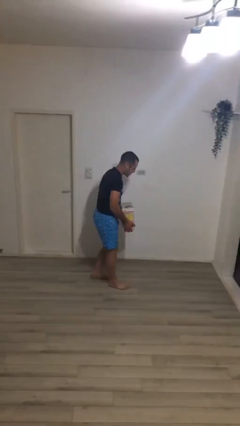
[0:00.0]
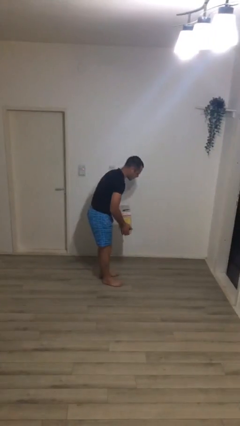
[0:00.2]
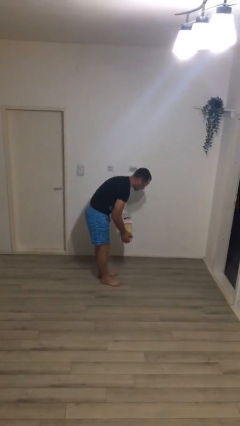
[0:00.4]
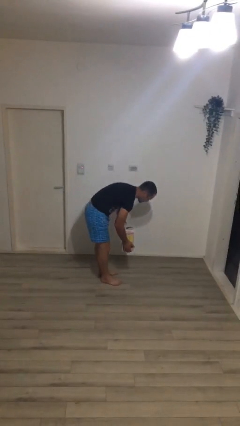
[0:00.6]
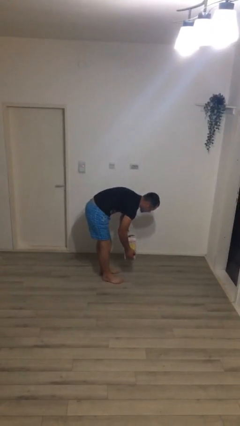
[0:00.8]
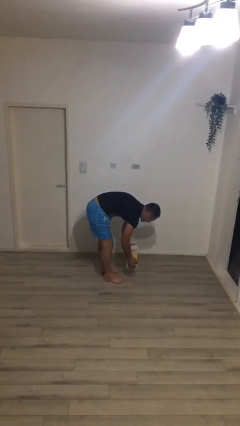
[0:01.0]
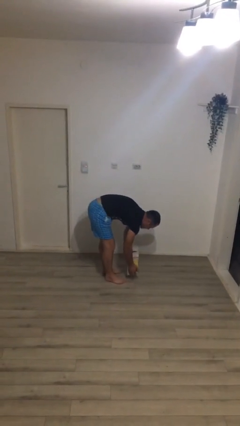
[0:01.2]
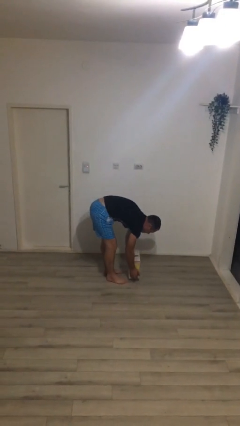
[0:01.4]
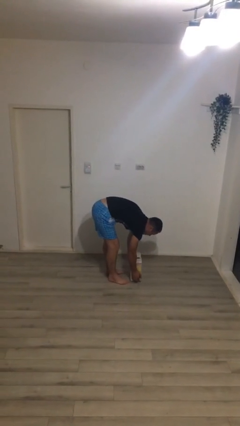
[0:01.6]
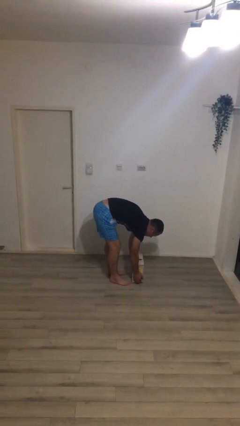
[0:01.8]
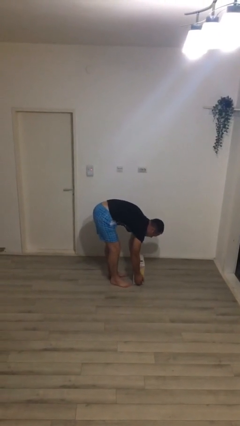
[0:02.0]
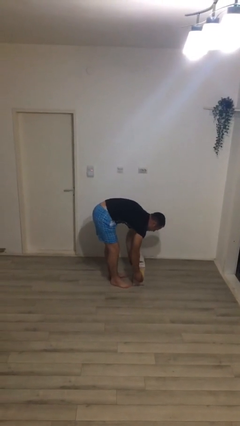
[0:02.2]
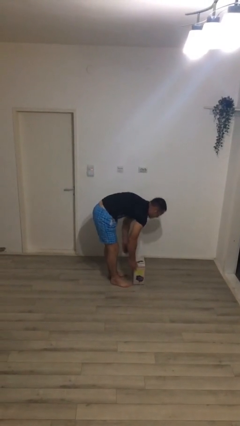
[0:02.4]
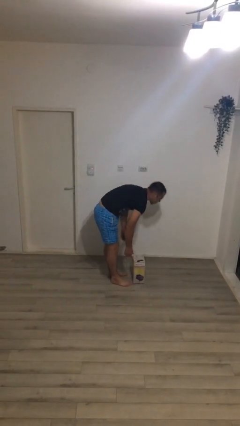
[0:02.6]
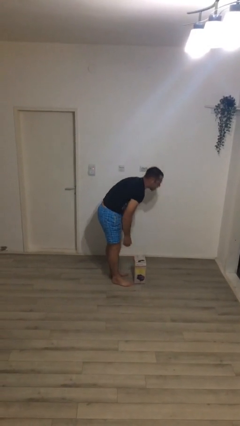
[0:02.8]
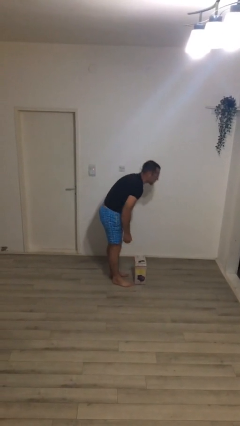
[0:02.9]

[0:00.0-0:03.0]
person puts down object on floor

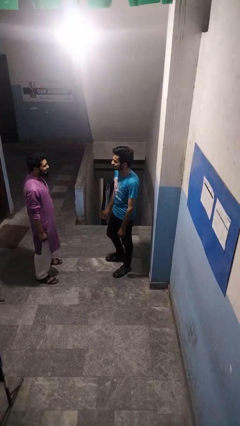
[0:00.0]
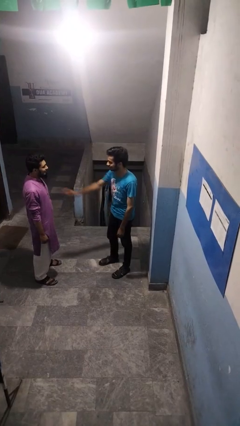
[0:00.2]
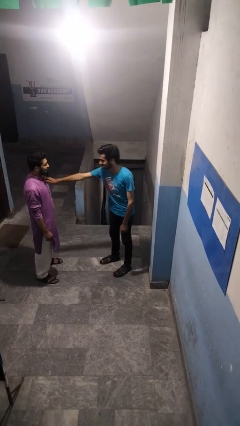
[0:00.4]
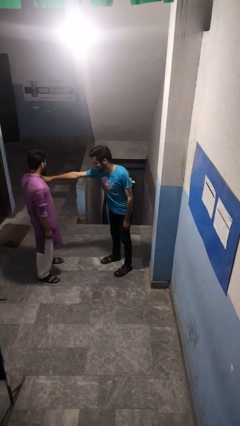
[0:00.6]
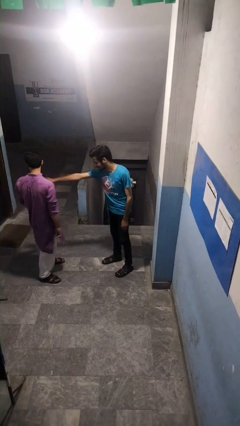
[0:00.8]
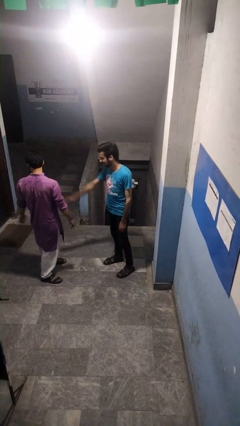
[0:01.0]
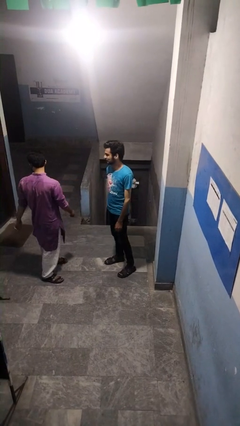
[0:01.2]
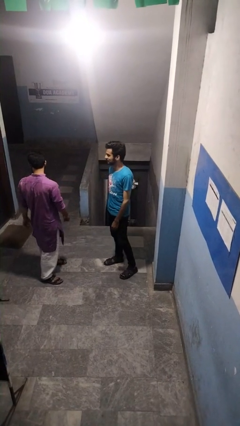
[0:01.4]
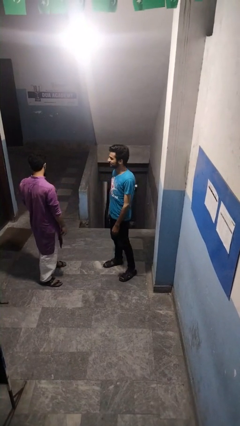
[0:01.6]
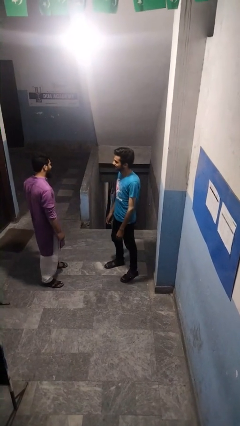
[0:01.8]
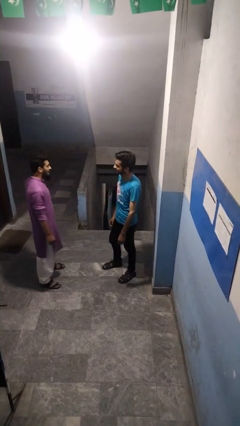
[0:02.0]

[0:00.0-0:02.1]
person shoves person

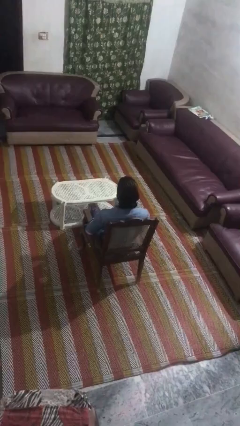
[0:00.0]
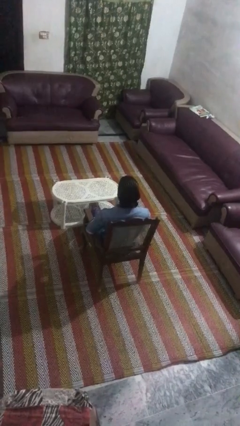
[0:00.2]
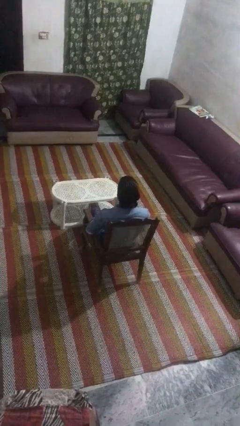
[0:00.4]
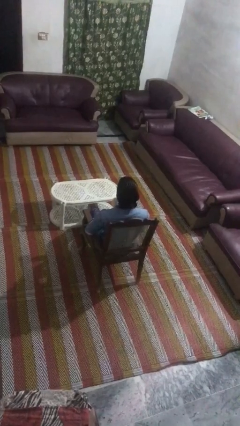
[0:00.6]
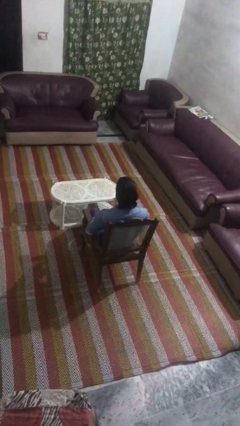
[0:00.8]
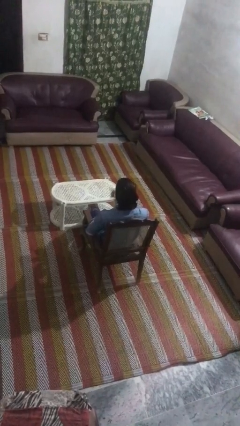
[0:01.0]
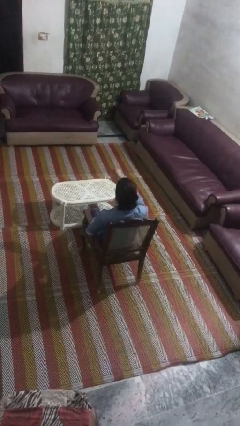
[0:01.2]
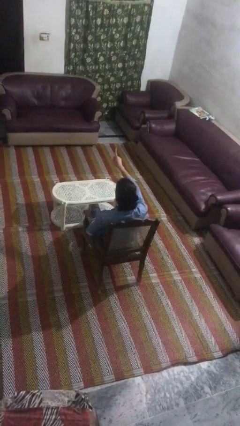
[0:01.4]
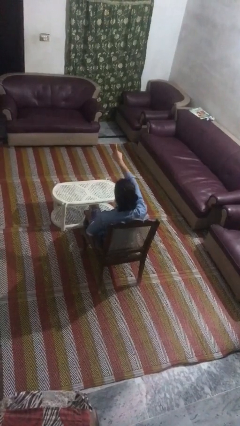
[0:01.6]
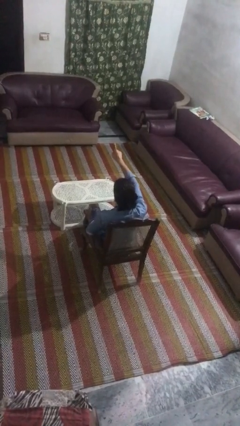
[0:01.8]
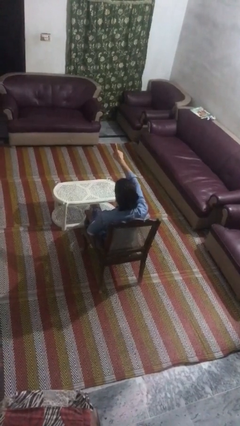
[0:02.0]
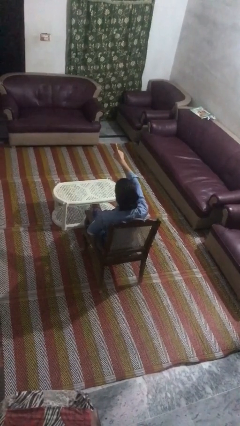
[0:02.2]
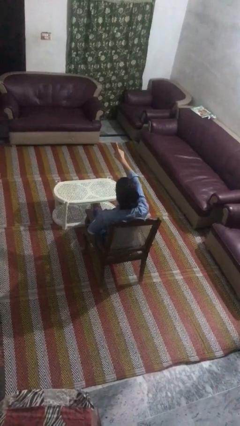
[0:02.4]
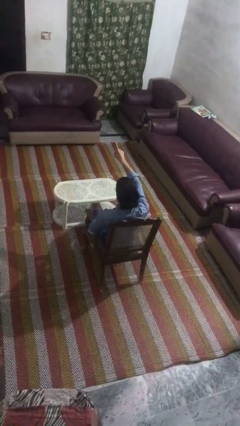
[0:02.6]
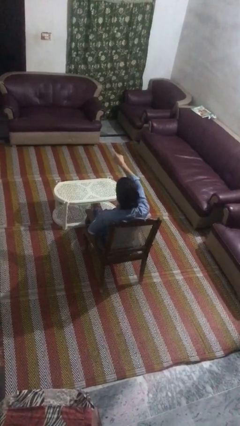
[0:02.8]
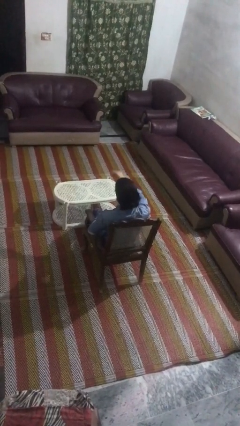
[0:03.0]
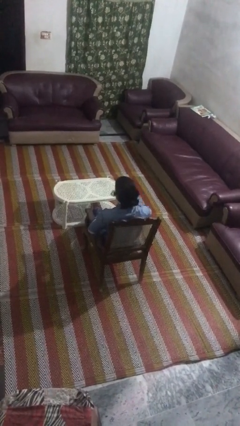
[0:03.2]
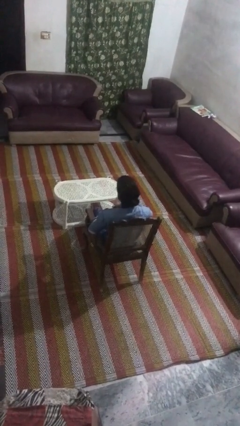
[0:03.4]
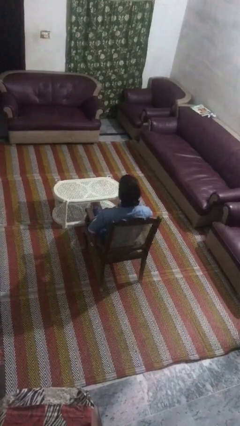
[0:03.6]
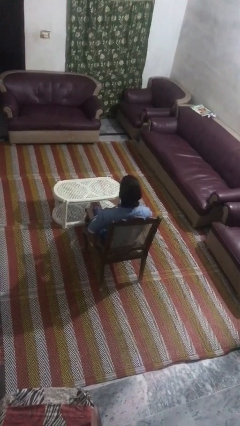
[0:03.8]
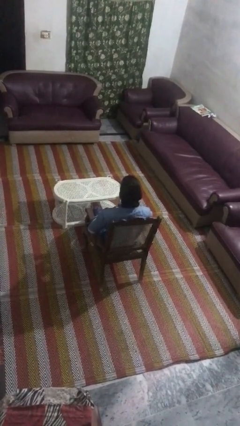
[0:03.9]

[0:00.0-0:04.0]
person gestures number one

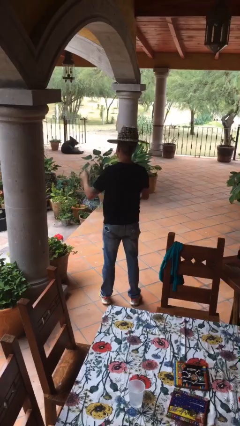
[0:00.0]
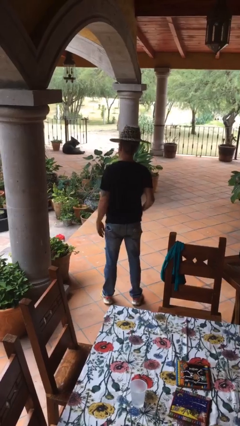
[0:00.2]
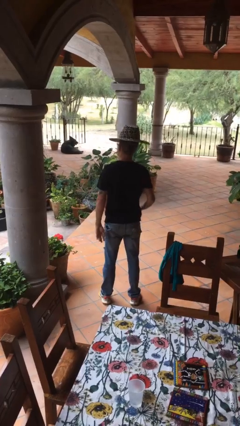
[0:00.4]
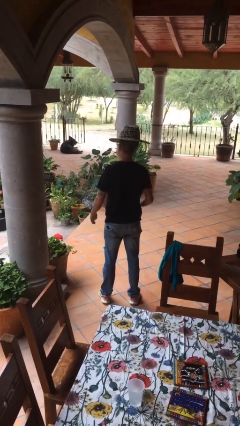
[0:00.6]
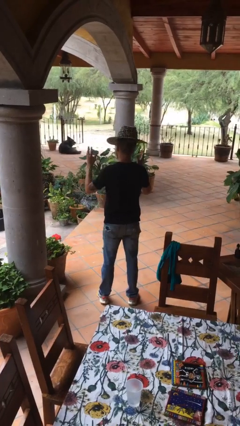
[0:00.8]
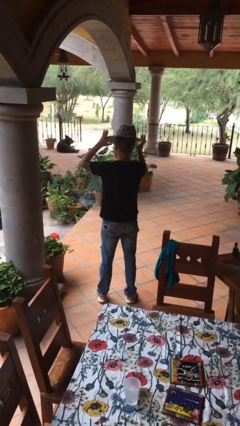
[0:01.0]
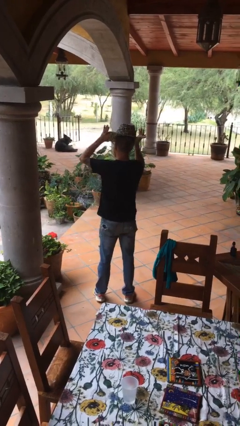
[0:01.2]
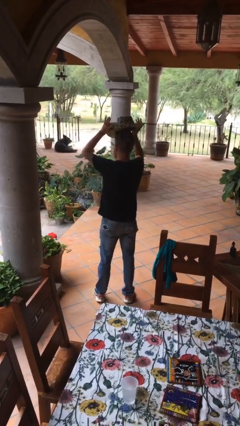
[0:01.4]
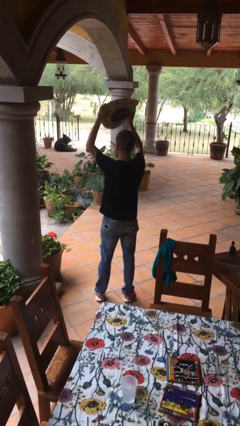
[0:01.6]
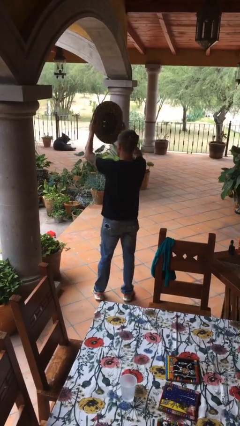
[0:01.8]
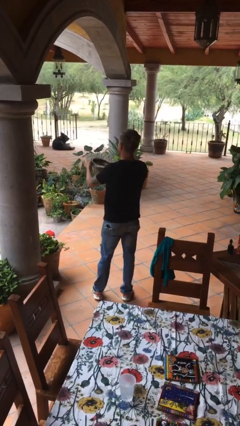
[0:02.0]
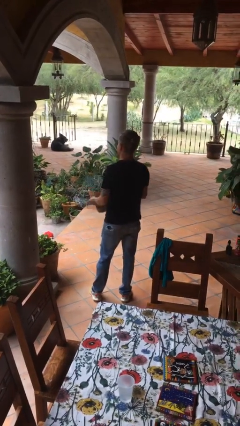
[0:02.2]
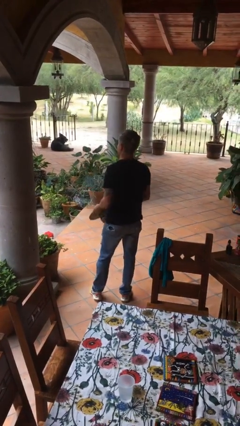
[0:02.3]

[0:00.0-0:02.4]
person takes off hat

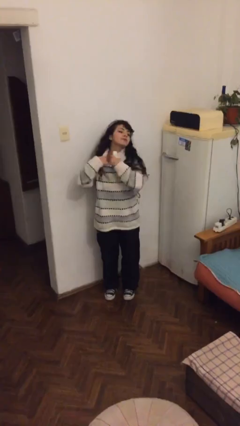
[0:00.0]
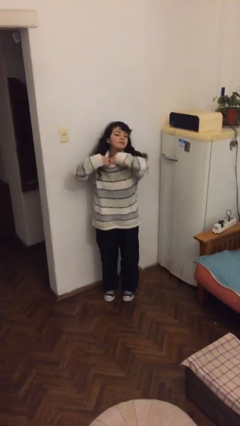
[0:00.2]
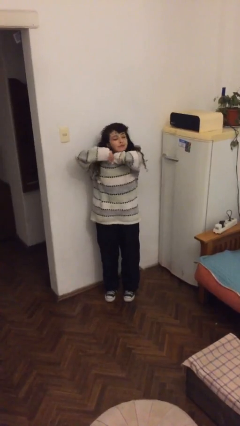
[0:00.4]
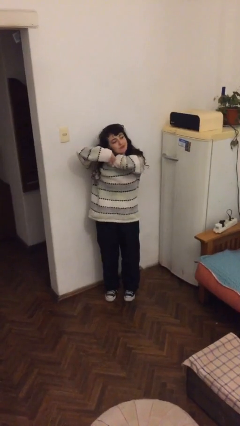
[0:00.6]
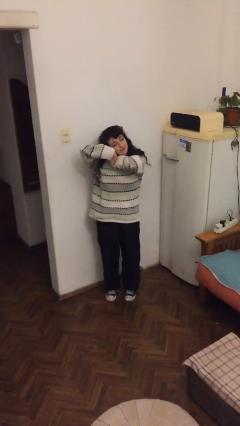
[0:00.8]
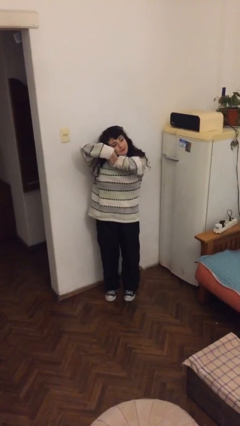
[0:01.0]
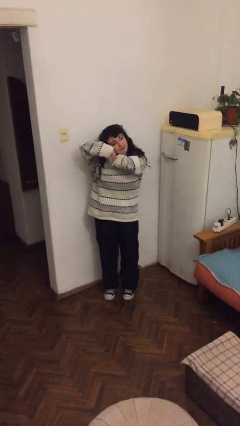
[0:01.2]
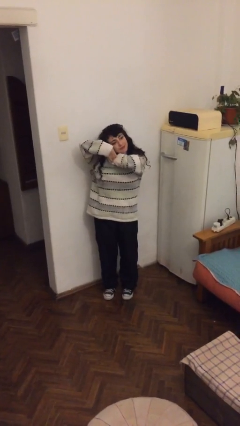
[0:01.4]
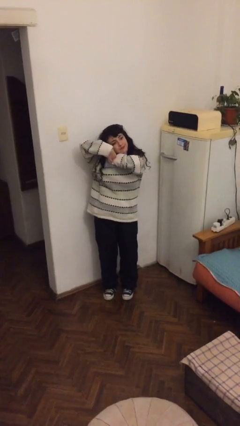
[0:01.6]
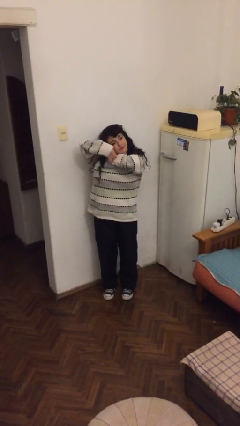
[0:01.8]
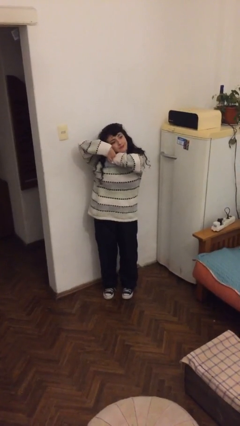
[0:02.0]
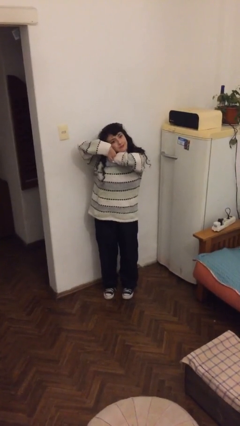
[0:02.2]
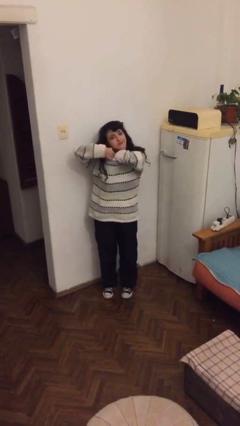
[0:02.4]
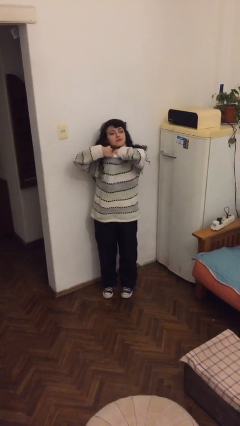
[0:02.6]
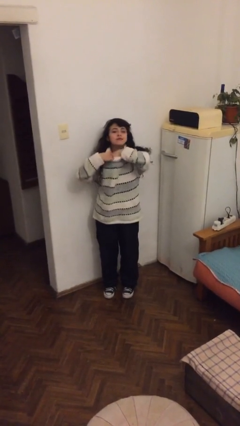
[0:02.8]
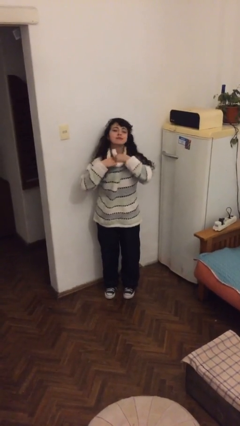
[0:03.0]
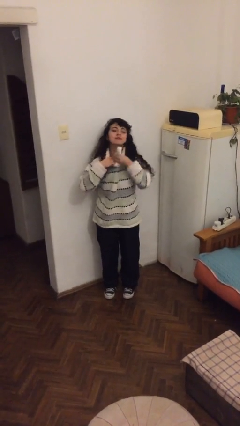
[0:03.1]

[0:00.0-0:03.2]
person applies deodorant

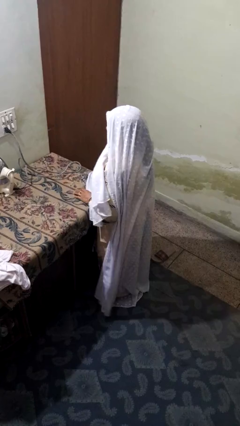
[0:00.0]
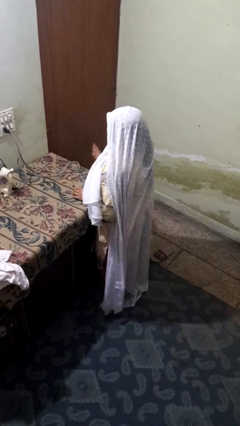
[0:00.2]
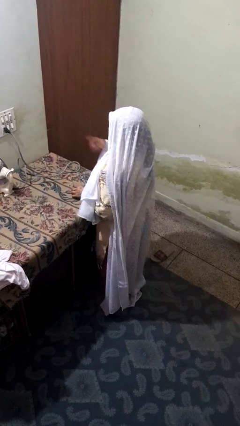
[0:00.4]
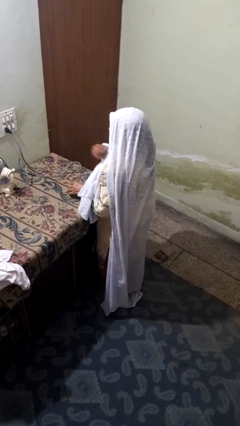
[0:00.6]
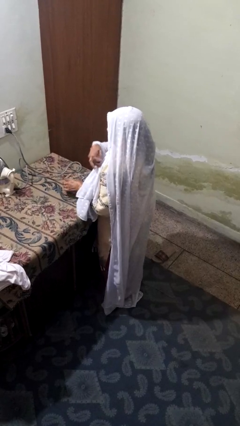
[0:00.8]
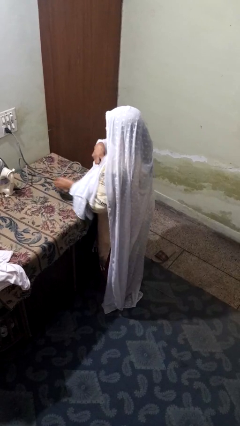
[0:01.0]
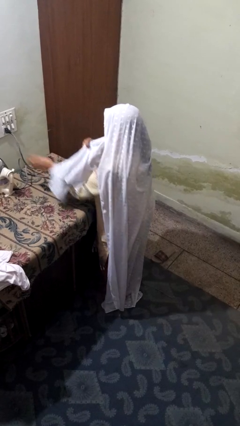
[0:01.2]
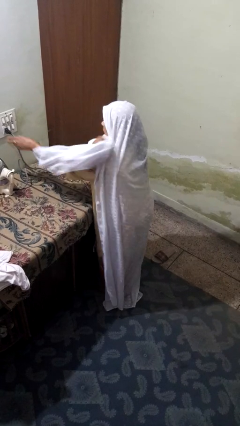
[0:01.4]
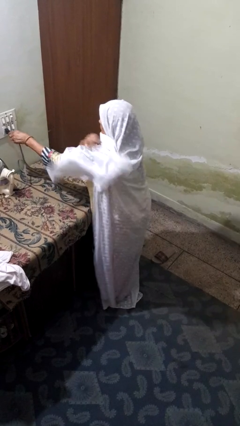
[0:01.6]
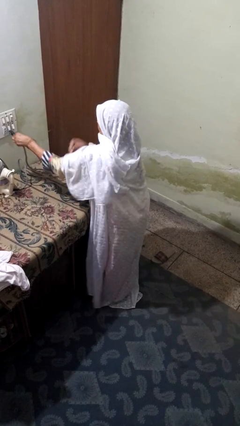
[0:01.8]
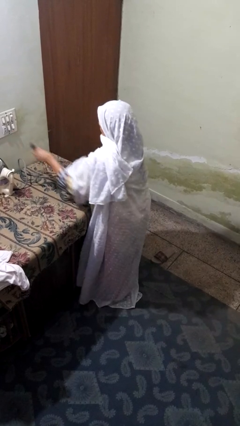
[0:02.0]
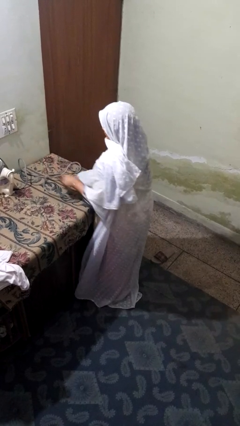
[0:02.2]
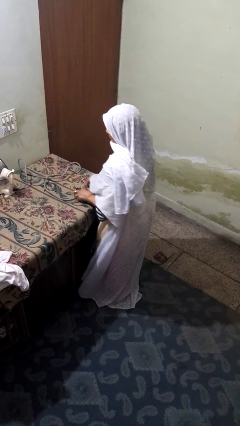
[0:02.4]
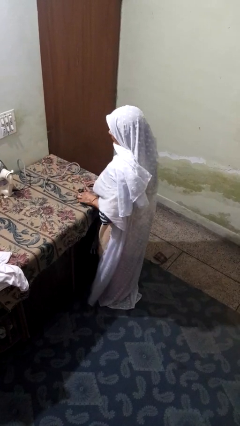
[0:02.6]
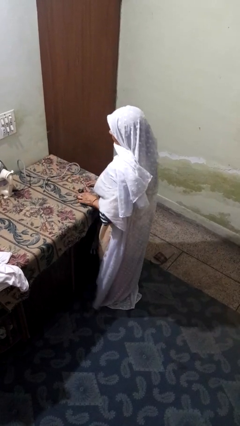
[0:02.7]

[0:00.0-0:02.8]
person unplugs from electrical socket
